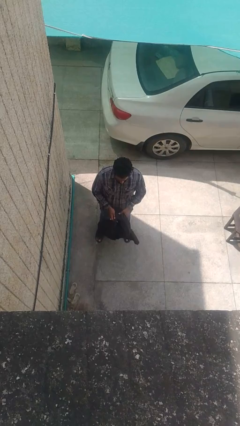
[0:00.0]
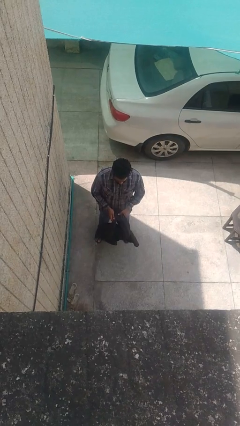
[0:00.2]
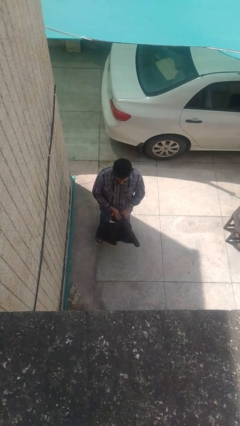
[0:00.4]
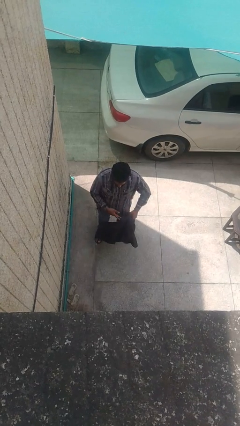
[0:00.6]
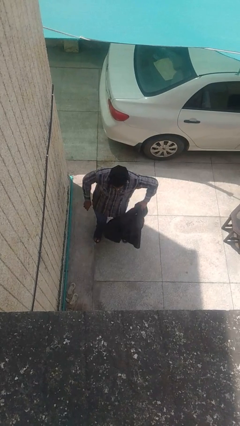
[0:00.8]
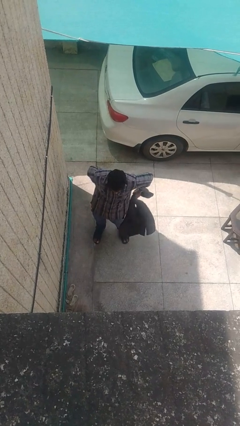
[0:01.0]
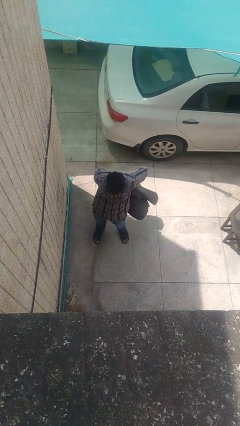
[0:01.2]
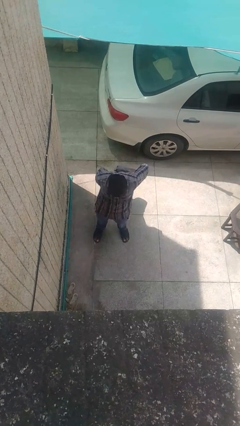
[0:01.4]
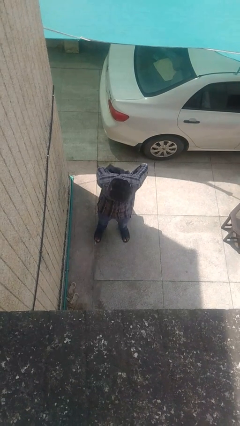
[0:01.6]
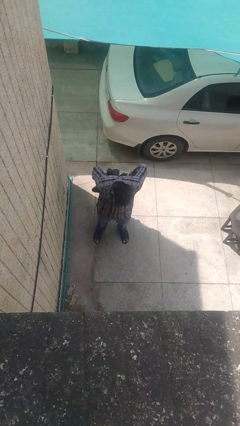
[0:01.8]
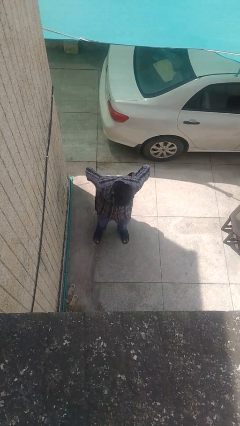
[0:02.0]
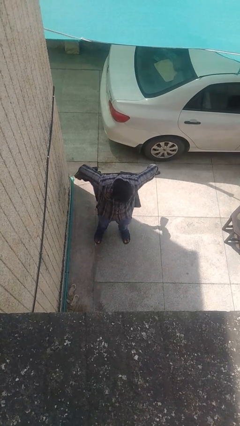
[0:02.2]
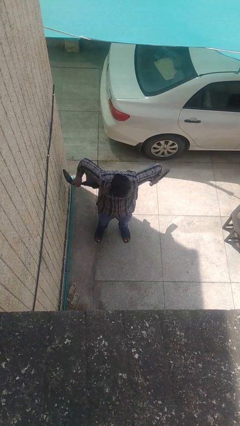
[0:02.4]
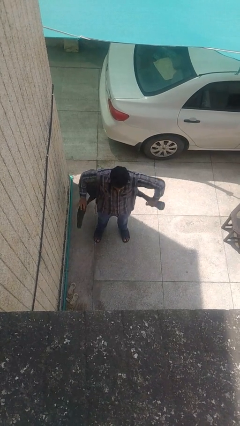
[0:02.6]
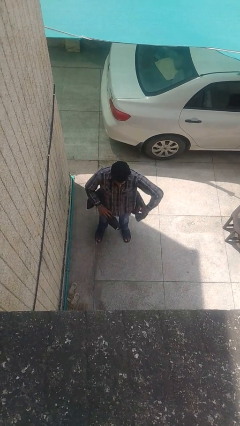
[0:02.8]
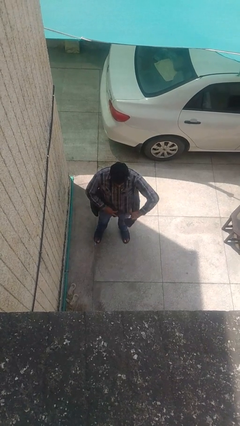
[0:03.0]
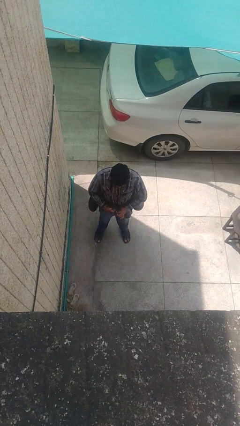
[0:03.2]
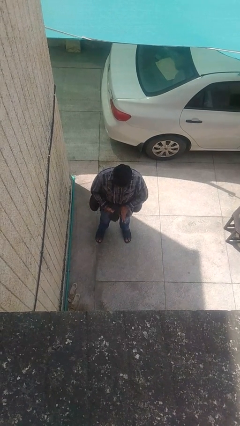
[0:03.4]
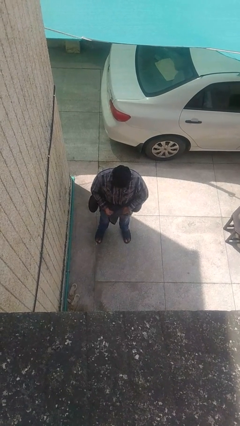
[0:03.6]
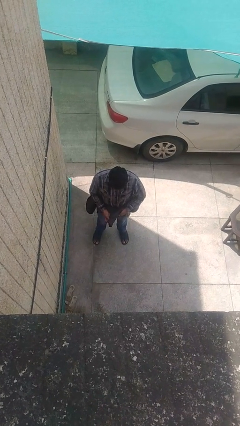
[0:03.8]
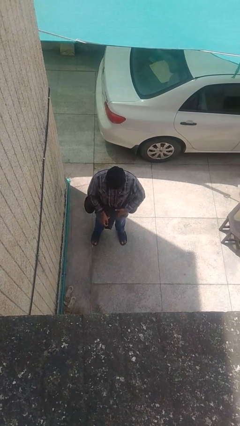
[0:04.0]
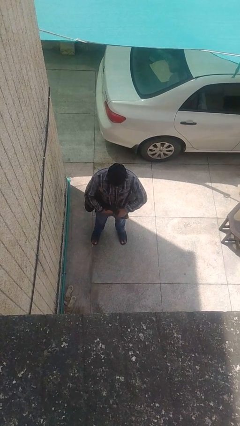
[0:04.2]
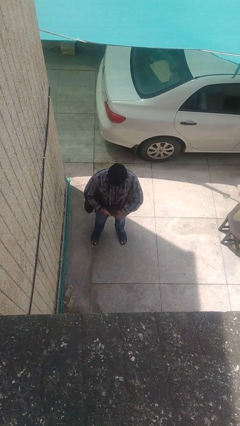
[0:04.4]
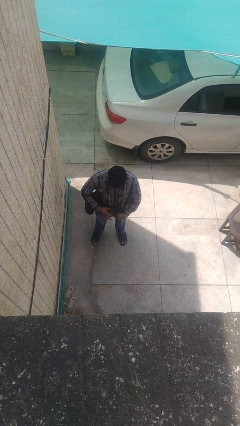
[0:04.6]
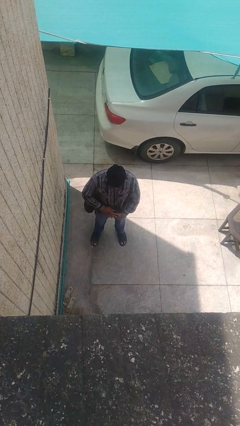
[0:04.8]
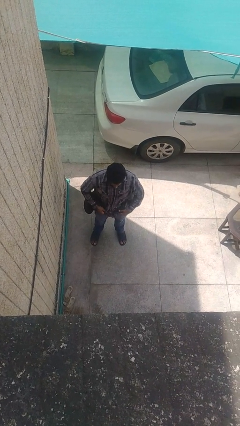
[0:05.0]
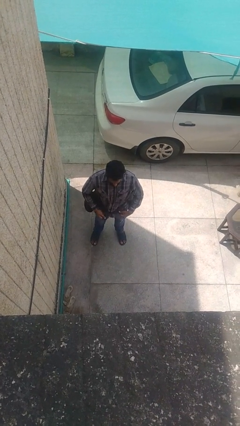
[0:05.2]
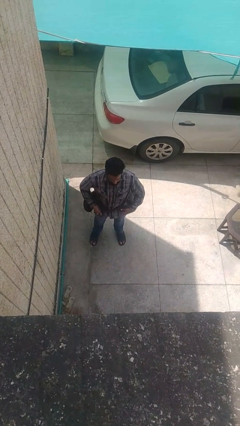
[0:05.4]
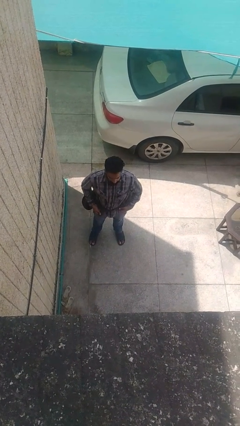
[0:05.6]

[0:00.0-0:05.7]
person ties jacket around waist

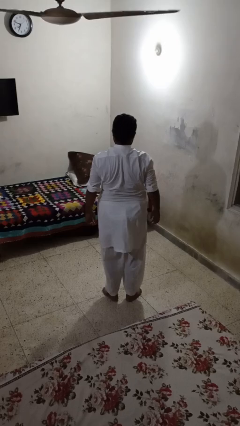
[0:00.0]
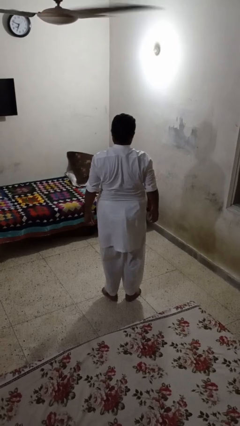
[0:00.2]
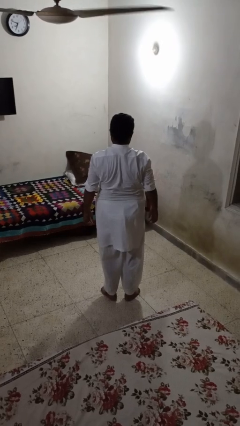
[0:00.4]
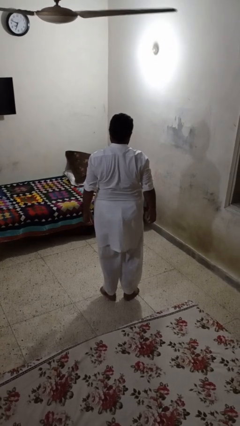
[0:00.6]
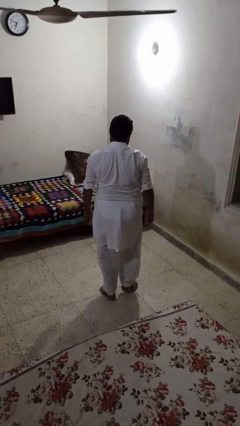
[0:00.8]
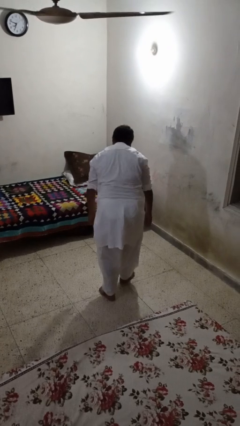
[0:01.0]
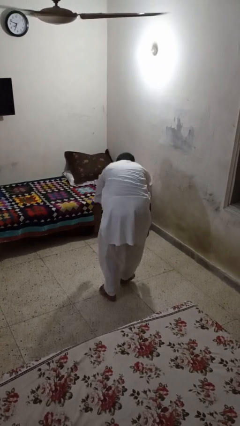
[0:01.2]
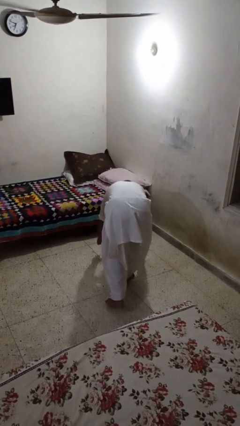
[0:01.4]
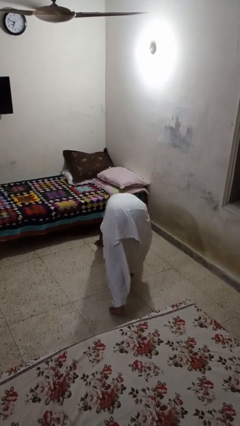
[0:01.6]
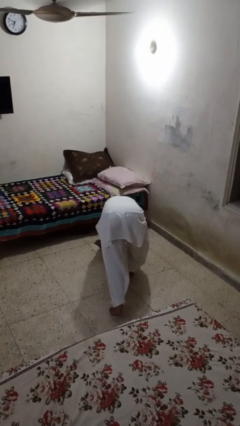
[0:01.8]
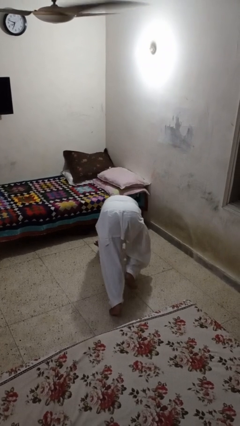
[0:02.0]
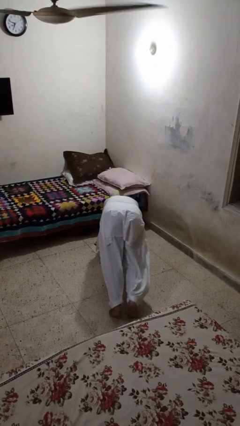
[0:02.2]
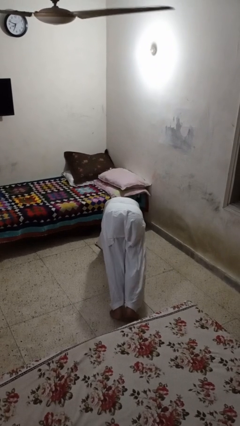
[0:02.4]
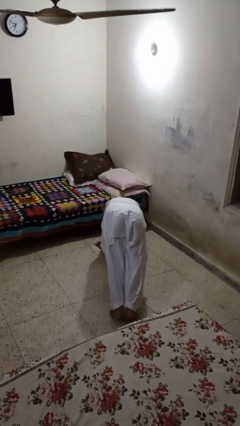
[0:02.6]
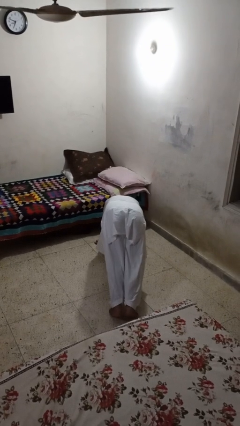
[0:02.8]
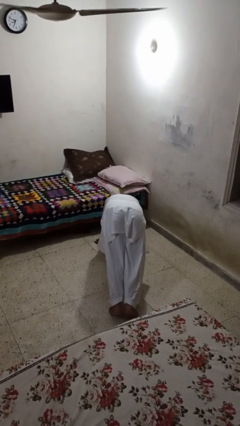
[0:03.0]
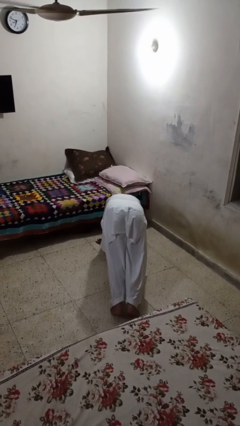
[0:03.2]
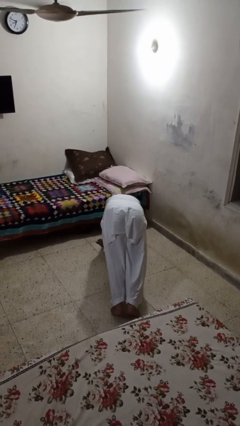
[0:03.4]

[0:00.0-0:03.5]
person exercises with plank

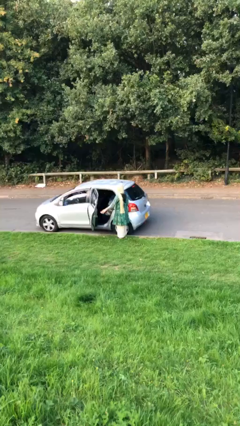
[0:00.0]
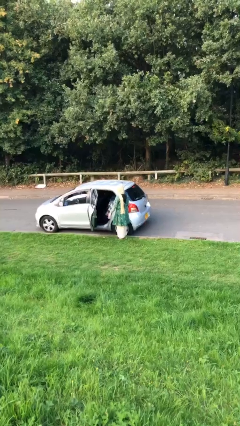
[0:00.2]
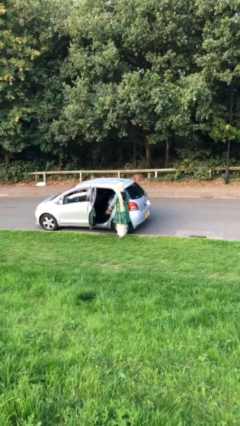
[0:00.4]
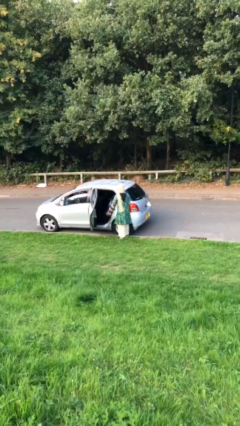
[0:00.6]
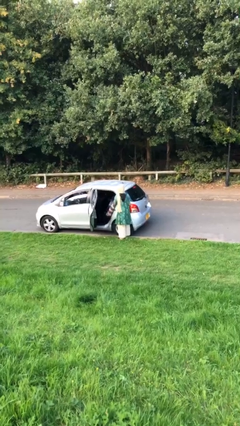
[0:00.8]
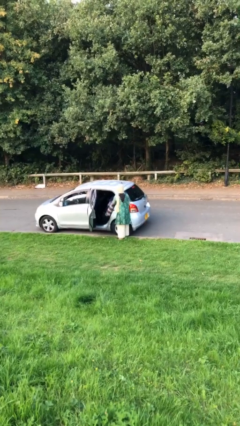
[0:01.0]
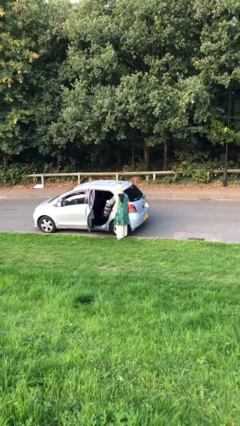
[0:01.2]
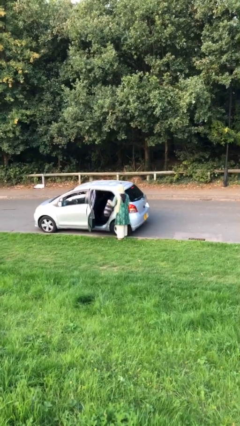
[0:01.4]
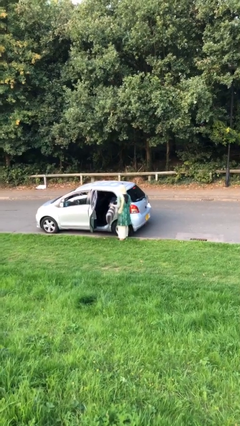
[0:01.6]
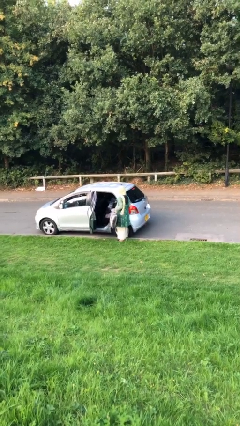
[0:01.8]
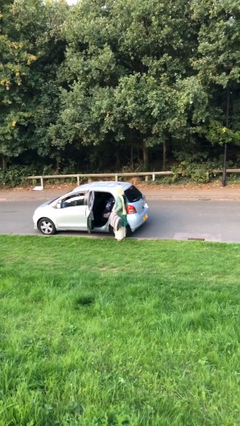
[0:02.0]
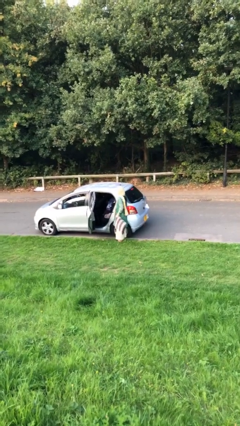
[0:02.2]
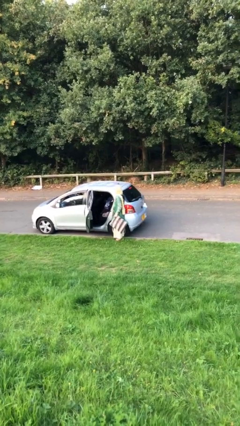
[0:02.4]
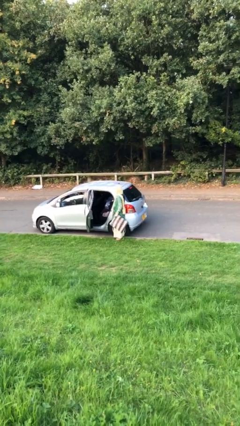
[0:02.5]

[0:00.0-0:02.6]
person unloads car

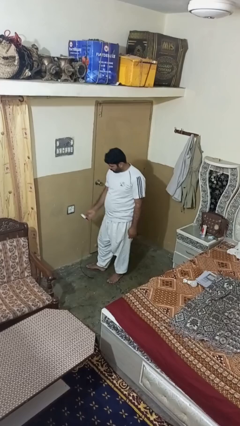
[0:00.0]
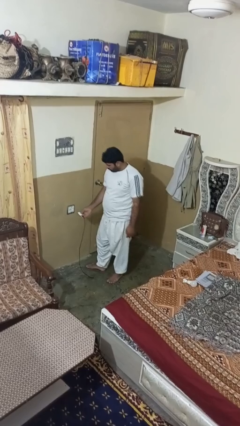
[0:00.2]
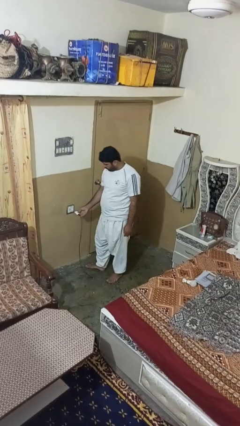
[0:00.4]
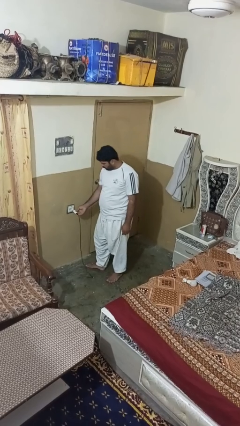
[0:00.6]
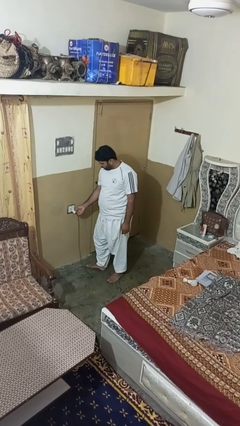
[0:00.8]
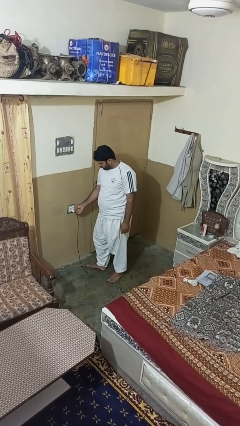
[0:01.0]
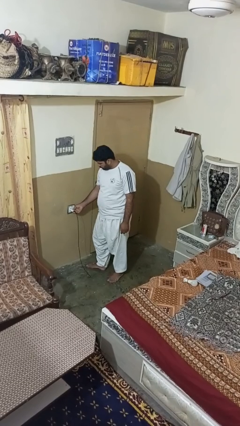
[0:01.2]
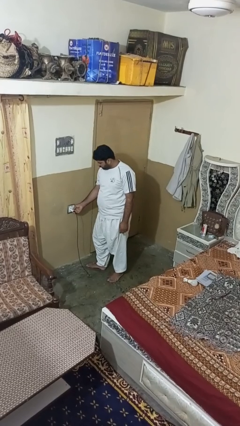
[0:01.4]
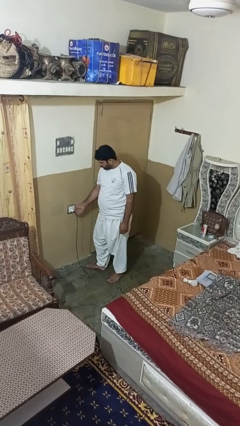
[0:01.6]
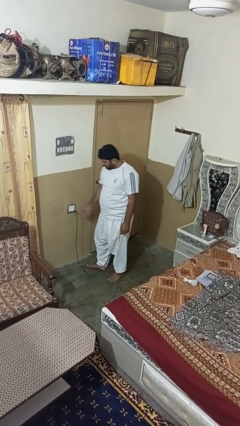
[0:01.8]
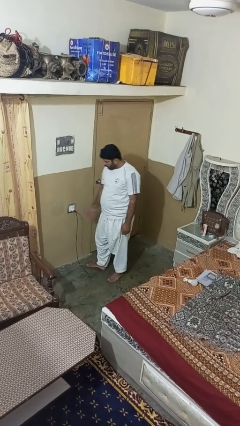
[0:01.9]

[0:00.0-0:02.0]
person plugs into electrical socket

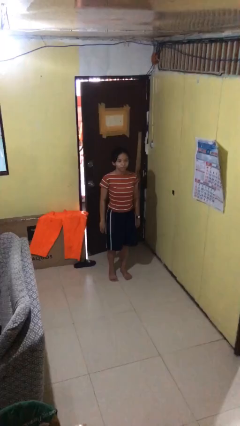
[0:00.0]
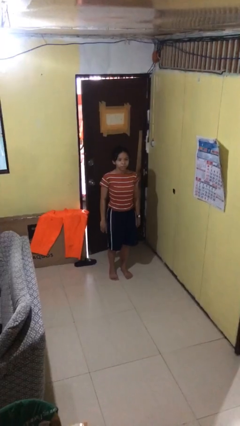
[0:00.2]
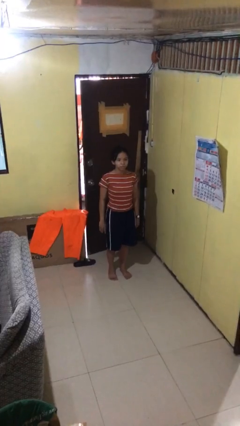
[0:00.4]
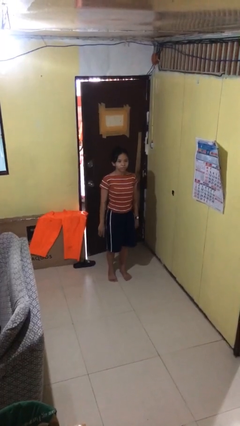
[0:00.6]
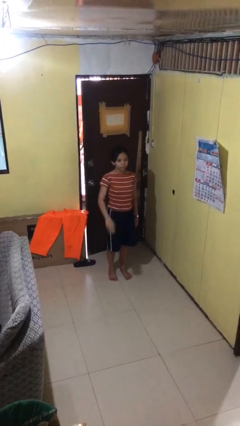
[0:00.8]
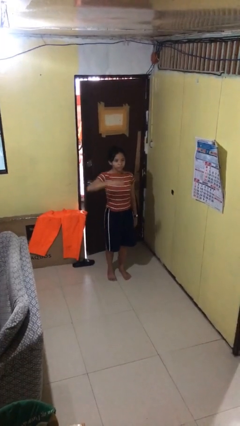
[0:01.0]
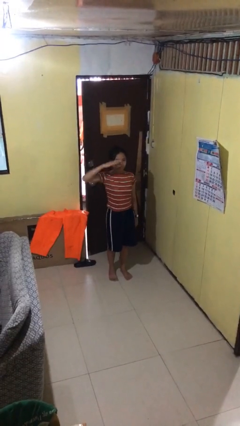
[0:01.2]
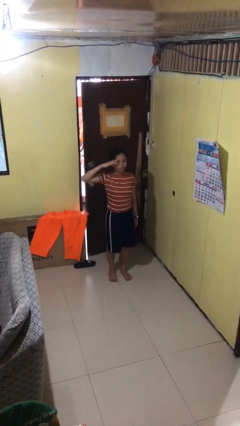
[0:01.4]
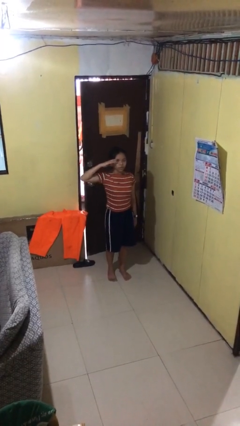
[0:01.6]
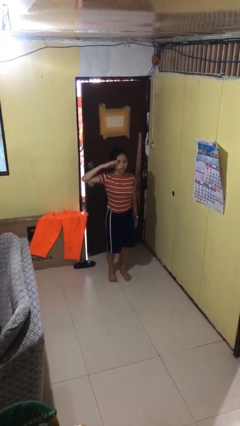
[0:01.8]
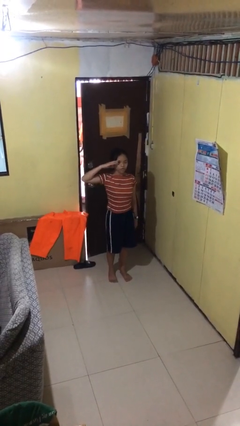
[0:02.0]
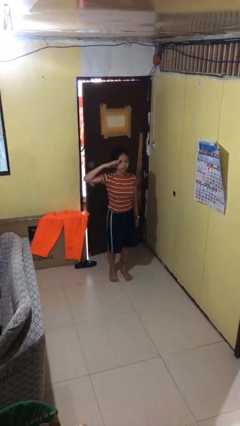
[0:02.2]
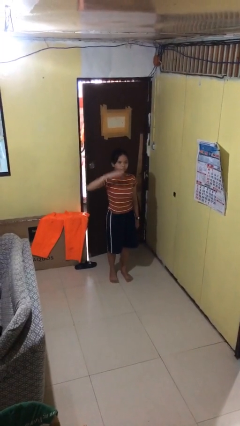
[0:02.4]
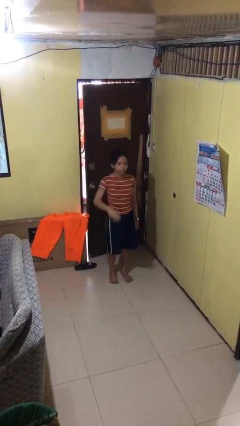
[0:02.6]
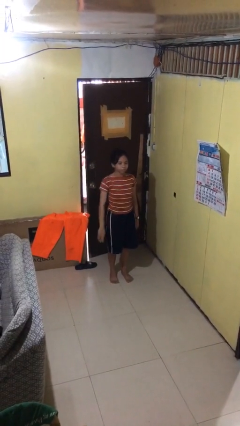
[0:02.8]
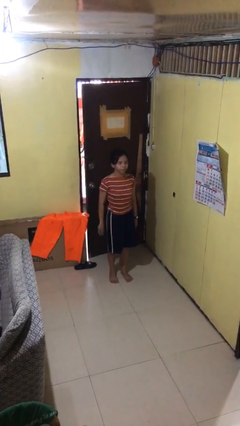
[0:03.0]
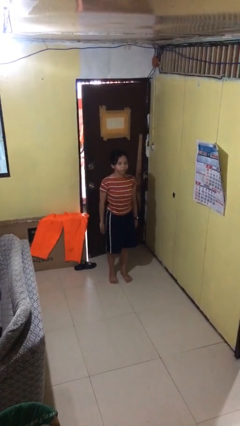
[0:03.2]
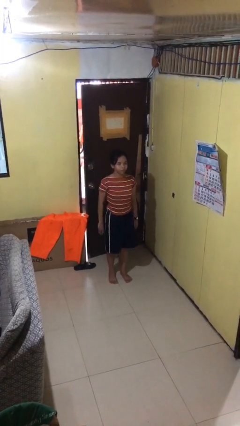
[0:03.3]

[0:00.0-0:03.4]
person salutes

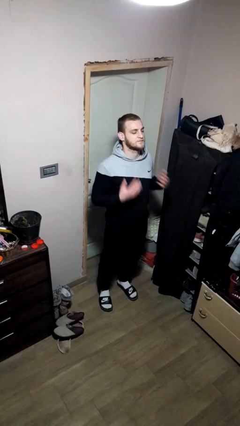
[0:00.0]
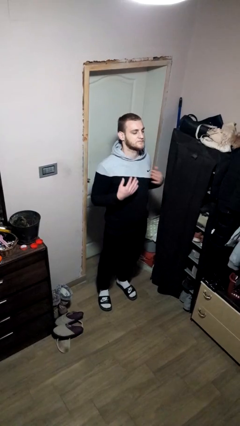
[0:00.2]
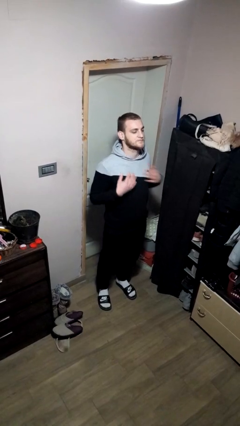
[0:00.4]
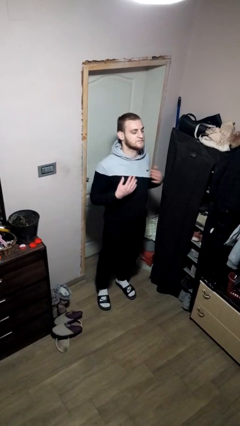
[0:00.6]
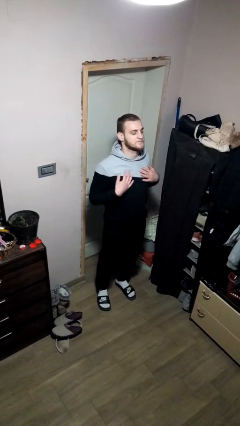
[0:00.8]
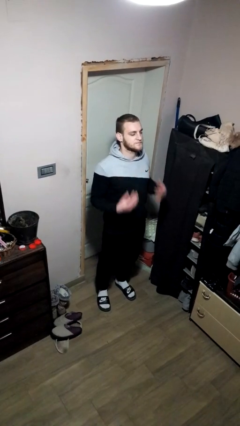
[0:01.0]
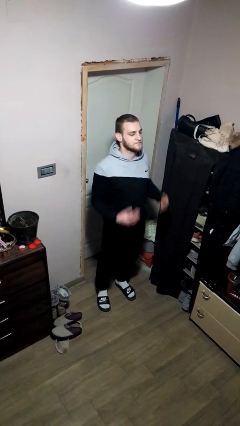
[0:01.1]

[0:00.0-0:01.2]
person drums on chest
